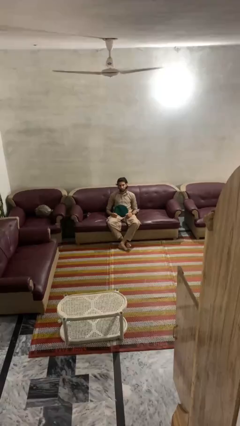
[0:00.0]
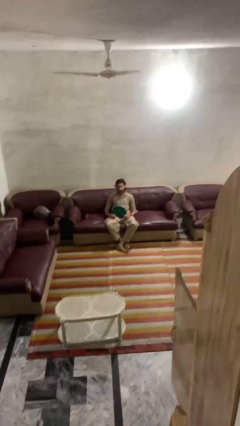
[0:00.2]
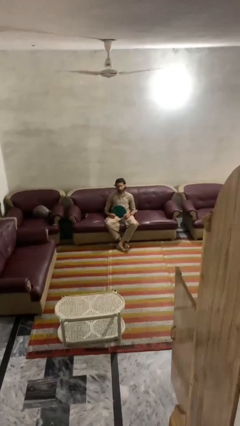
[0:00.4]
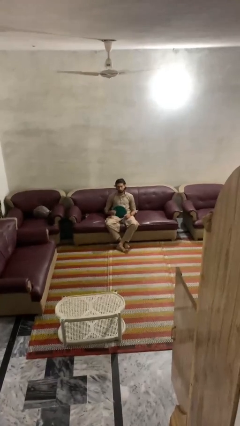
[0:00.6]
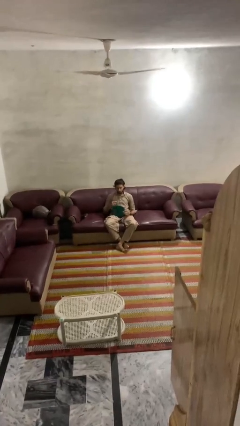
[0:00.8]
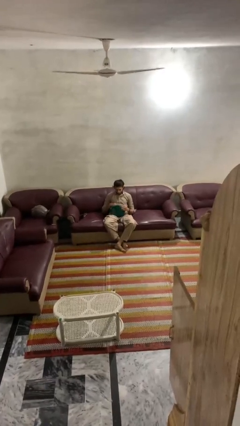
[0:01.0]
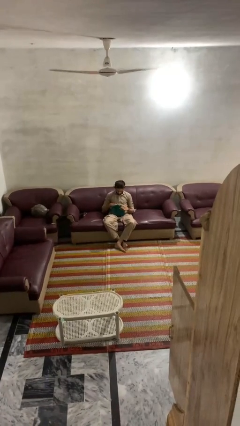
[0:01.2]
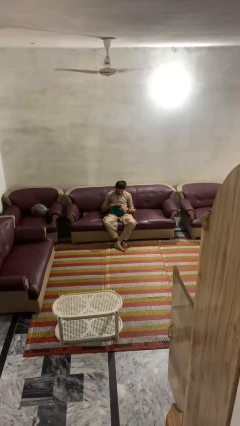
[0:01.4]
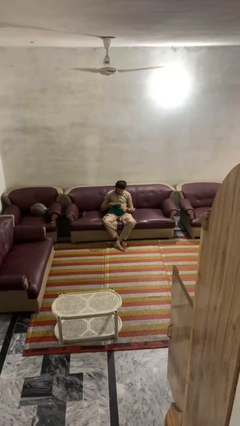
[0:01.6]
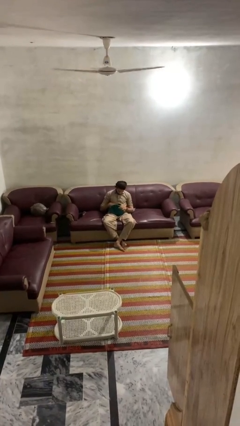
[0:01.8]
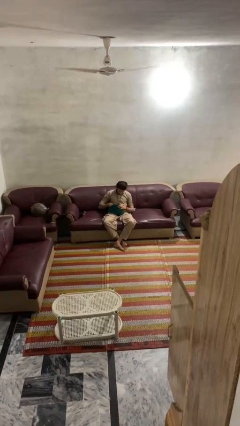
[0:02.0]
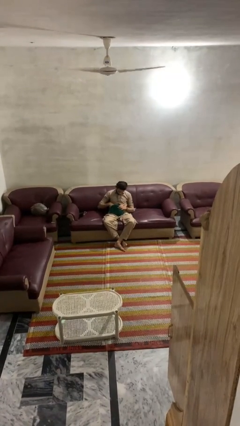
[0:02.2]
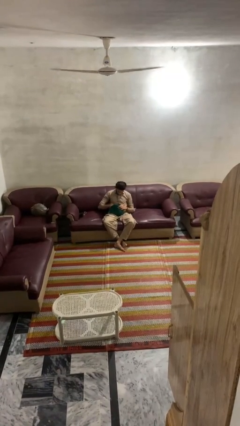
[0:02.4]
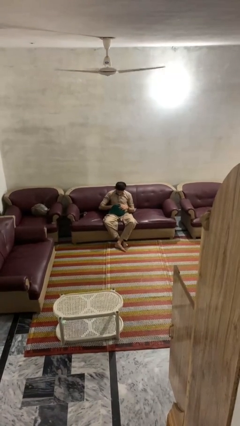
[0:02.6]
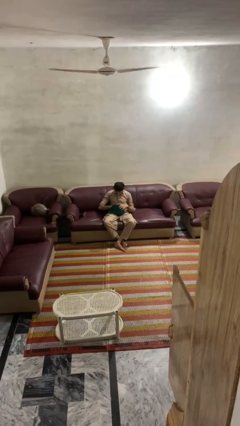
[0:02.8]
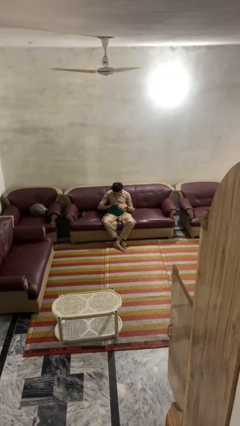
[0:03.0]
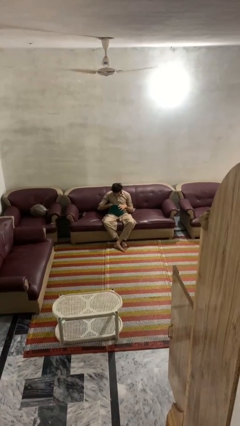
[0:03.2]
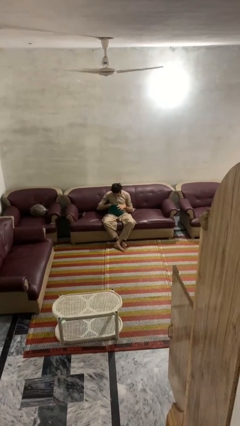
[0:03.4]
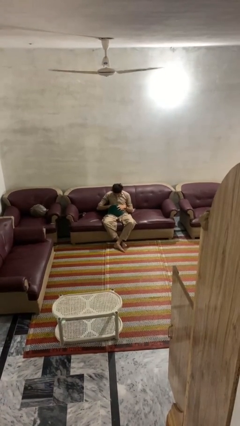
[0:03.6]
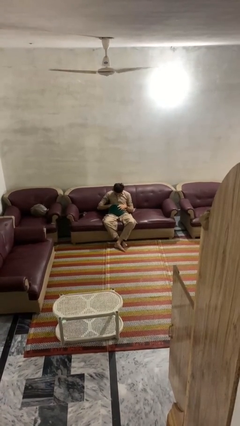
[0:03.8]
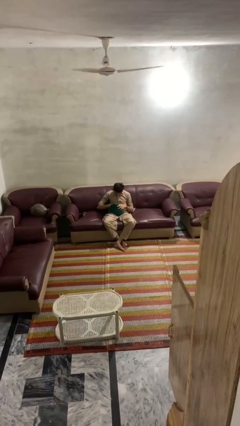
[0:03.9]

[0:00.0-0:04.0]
person searches in purse

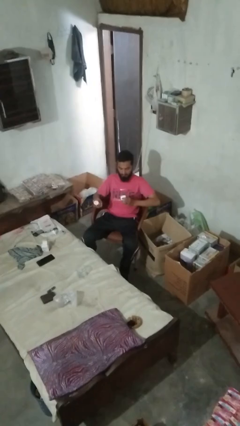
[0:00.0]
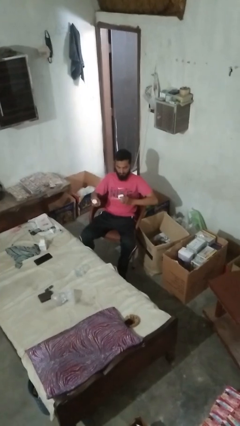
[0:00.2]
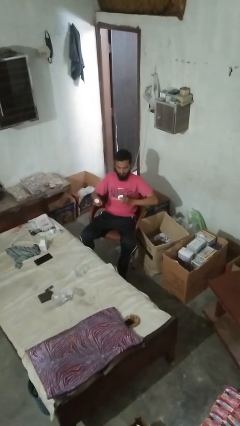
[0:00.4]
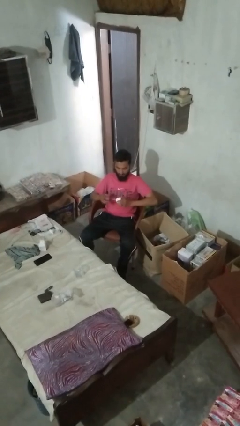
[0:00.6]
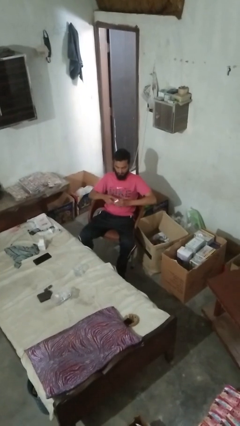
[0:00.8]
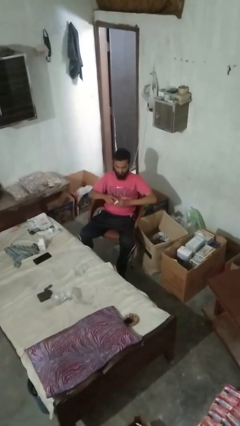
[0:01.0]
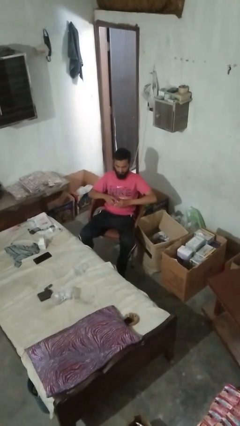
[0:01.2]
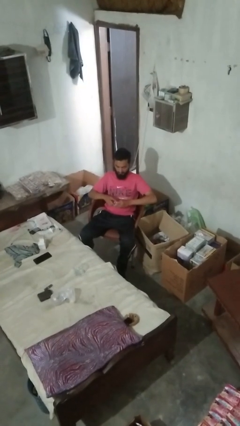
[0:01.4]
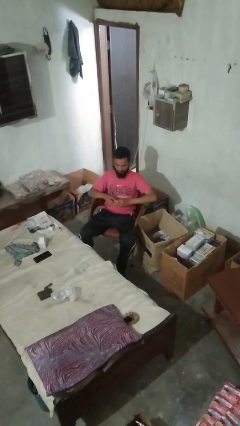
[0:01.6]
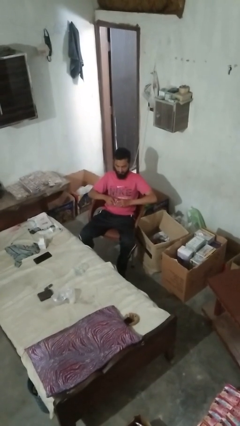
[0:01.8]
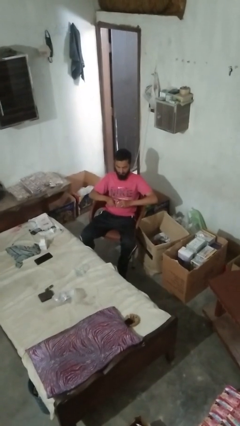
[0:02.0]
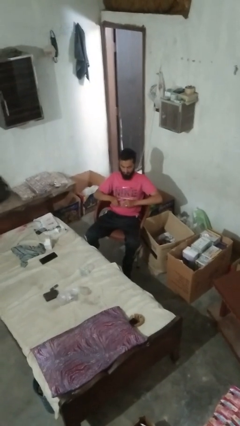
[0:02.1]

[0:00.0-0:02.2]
person closes jar

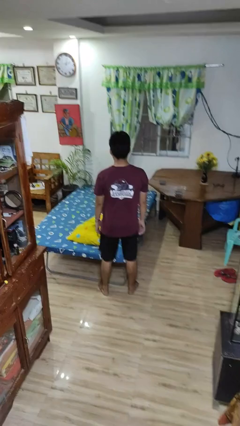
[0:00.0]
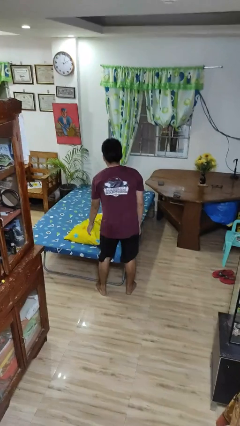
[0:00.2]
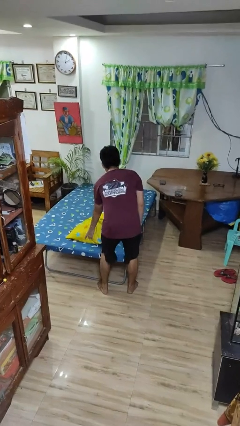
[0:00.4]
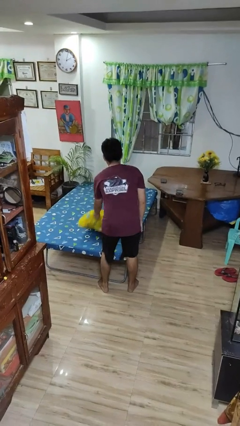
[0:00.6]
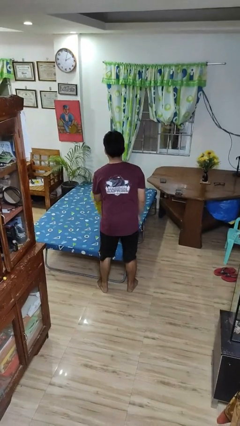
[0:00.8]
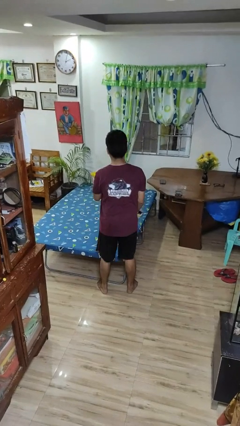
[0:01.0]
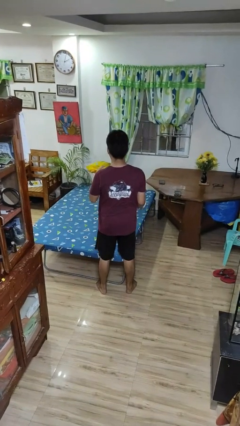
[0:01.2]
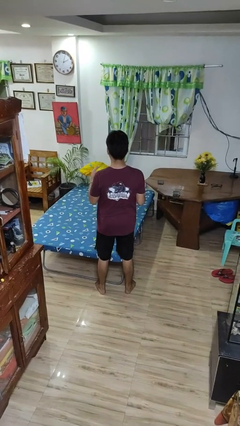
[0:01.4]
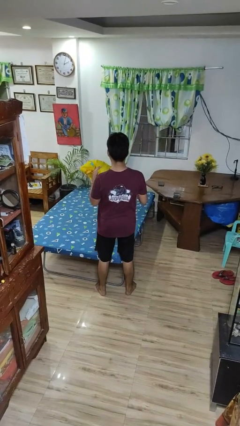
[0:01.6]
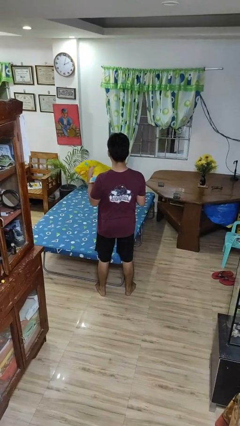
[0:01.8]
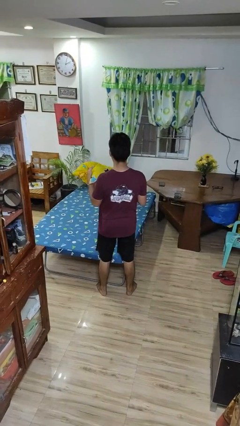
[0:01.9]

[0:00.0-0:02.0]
person picks up object from bed

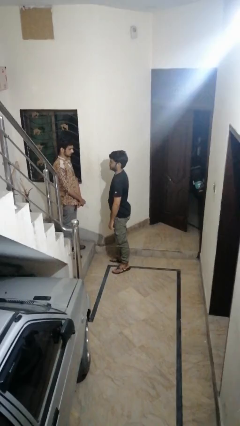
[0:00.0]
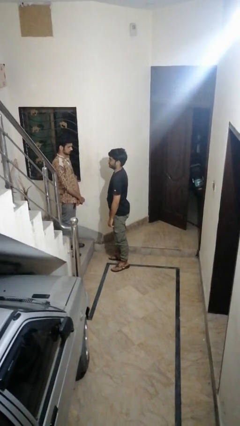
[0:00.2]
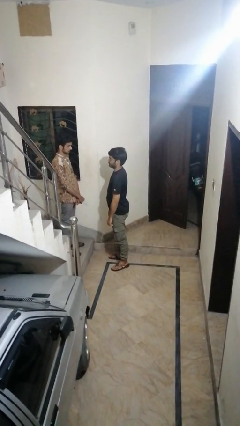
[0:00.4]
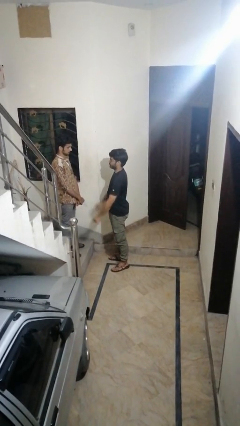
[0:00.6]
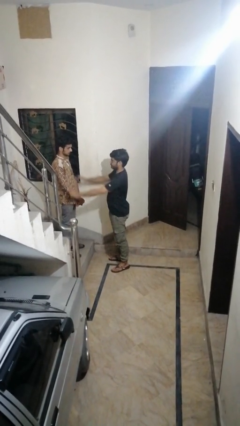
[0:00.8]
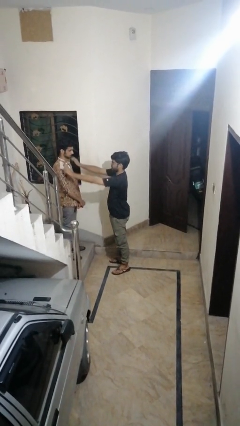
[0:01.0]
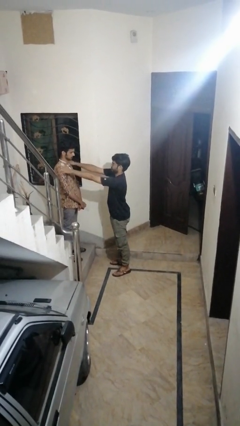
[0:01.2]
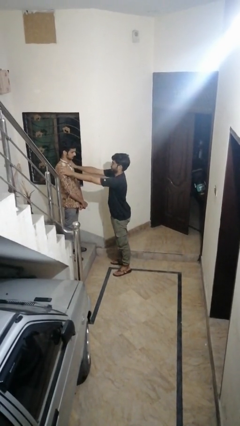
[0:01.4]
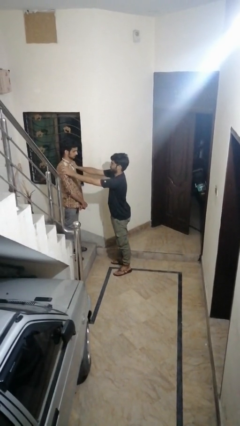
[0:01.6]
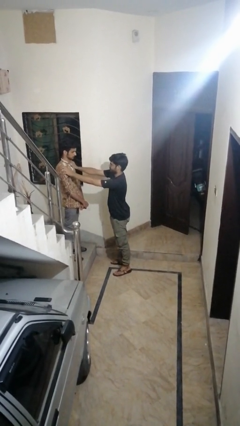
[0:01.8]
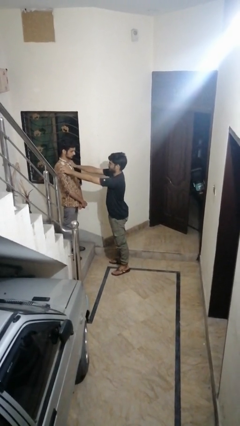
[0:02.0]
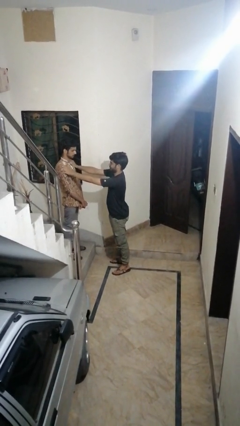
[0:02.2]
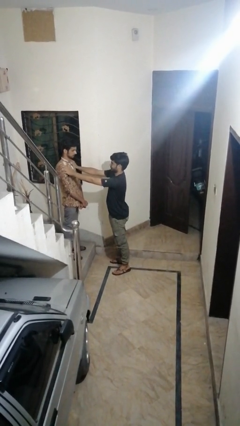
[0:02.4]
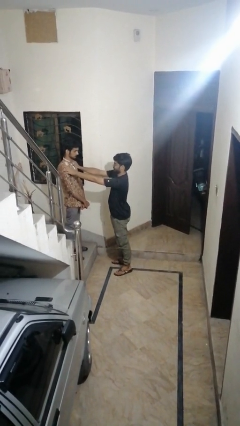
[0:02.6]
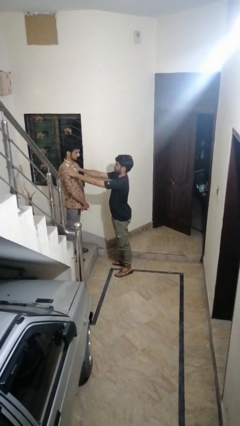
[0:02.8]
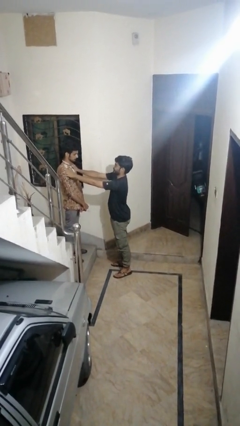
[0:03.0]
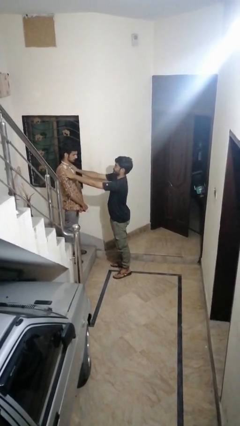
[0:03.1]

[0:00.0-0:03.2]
person pounds shoulders of person

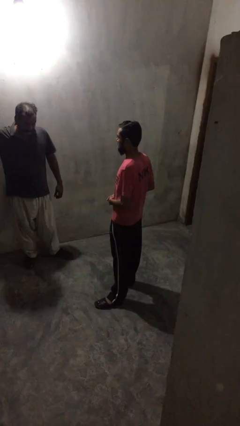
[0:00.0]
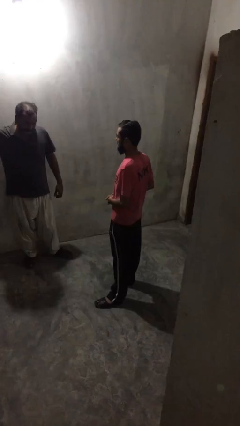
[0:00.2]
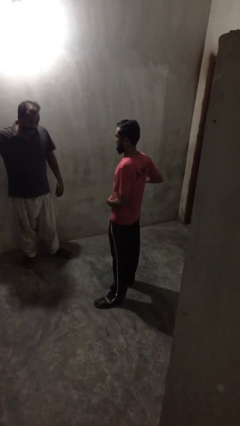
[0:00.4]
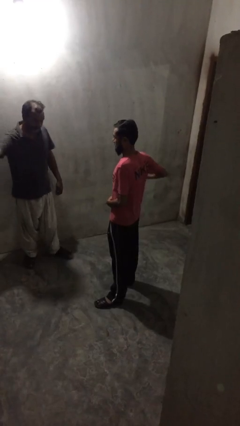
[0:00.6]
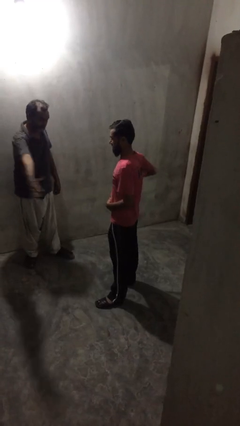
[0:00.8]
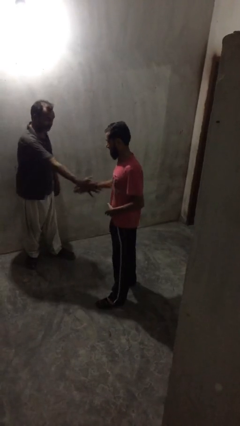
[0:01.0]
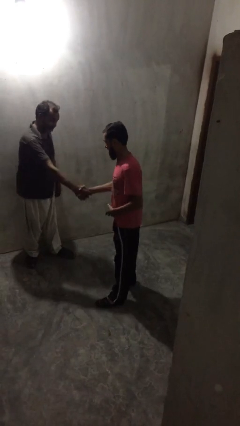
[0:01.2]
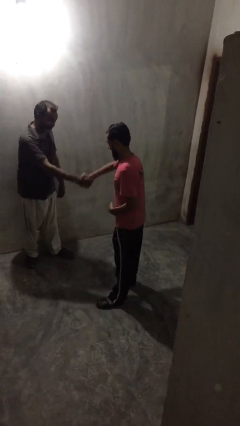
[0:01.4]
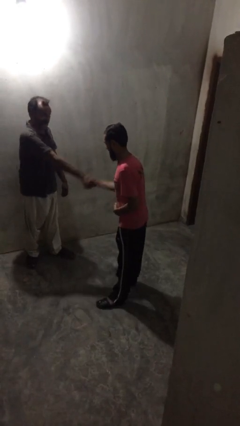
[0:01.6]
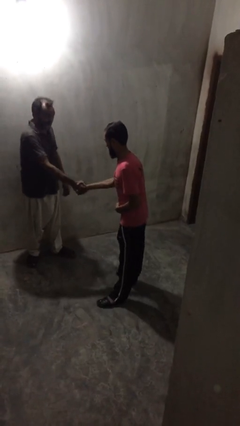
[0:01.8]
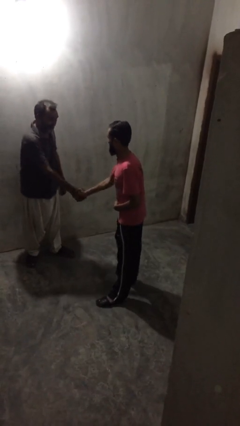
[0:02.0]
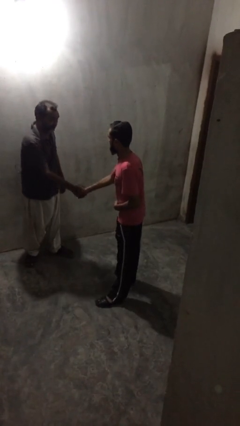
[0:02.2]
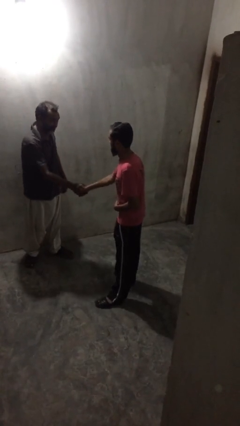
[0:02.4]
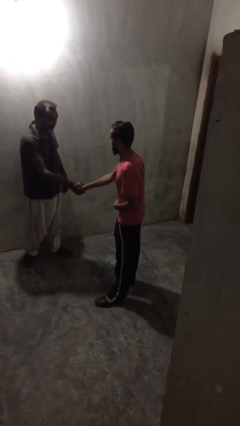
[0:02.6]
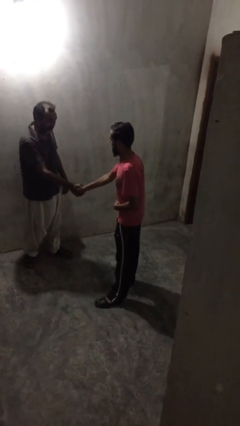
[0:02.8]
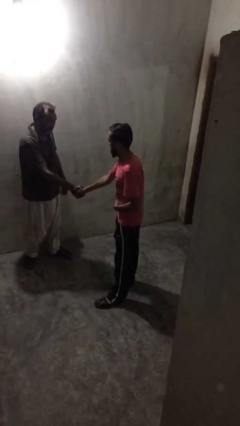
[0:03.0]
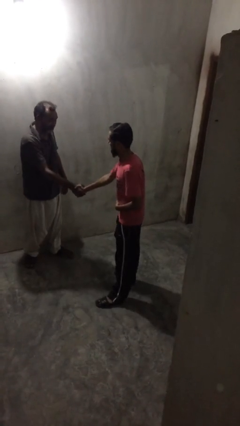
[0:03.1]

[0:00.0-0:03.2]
person shakes hand

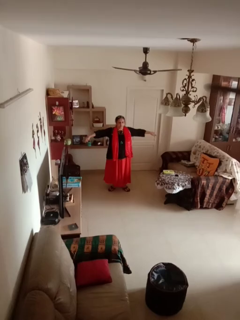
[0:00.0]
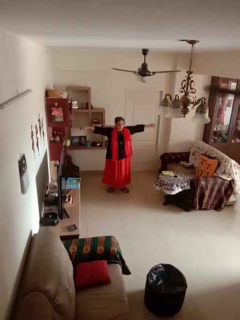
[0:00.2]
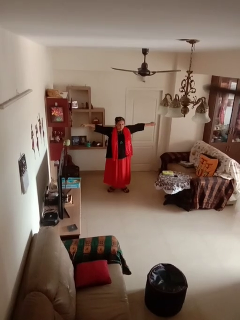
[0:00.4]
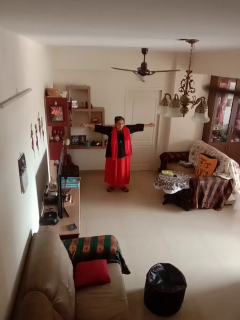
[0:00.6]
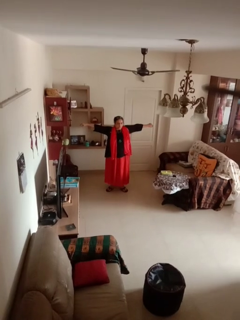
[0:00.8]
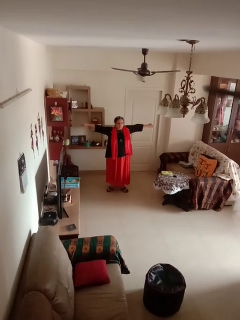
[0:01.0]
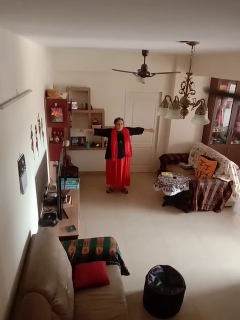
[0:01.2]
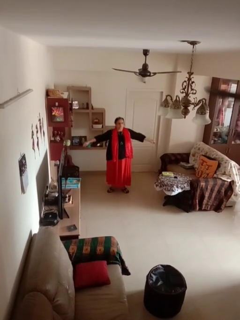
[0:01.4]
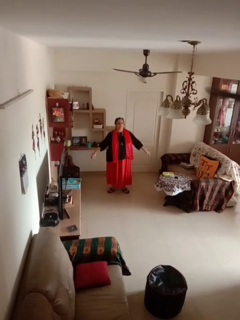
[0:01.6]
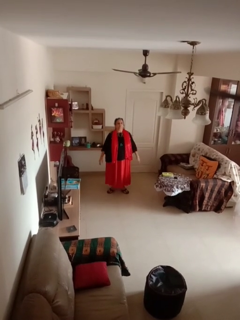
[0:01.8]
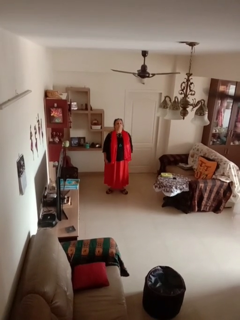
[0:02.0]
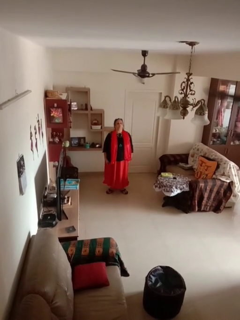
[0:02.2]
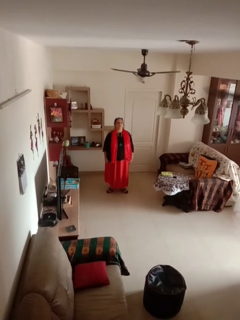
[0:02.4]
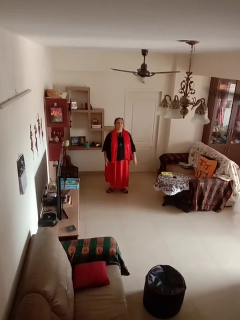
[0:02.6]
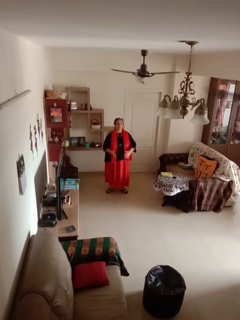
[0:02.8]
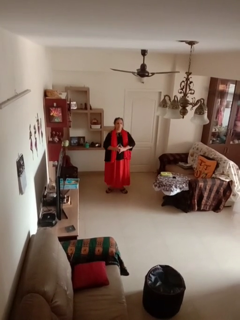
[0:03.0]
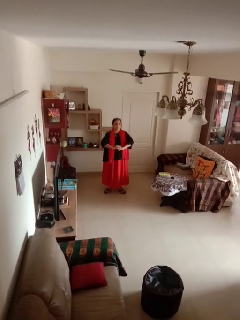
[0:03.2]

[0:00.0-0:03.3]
person stretches arms to side

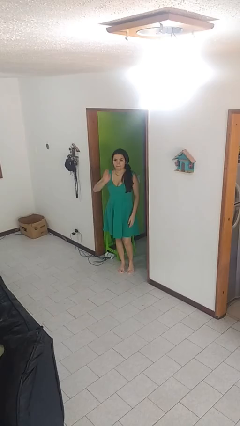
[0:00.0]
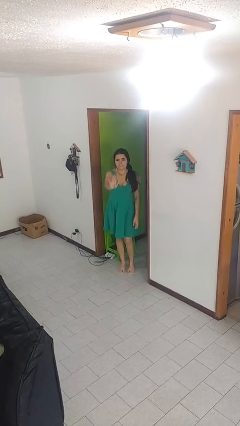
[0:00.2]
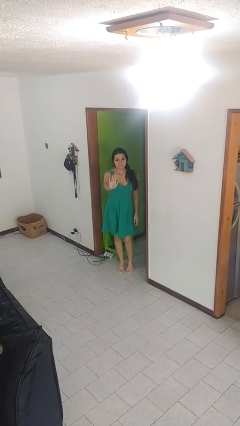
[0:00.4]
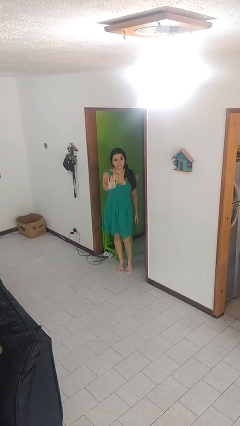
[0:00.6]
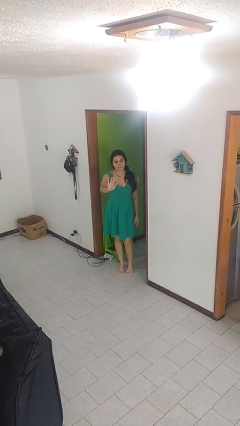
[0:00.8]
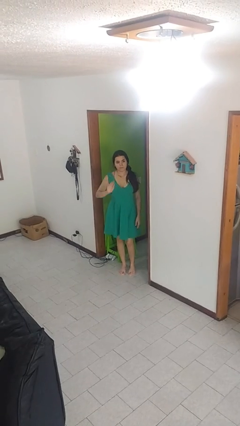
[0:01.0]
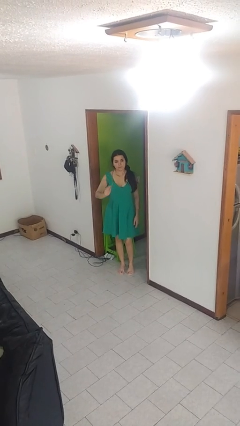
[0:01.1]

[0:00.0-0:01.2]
person gestures stop
